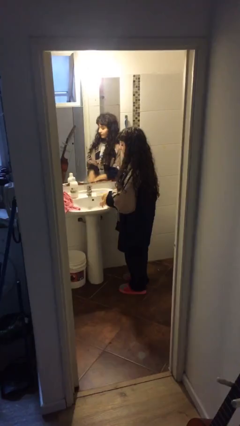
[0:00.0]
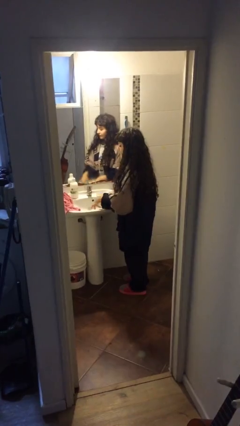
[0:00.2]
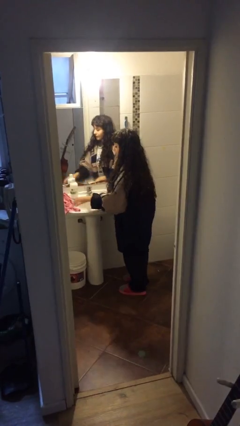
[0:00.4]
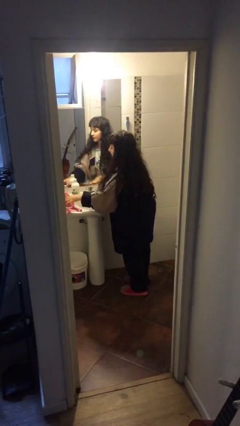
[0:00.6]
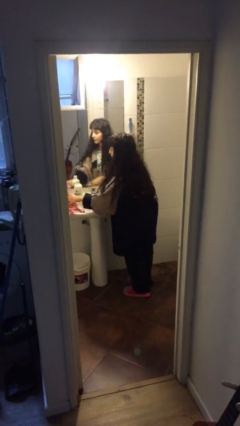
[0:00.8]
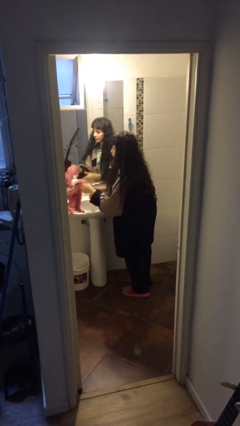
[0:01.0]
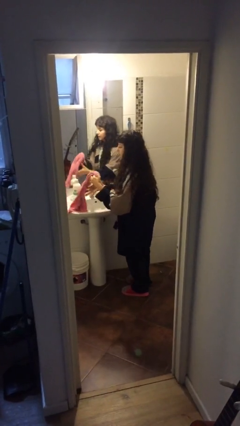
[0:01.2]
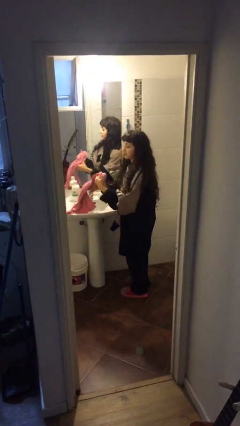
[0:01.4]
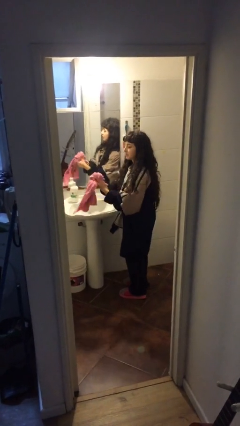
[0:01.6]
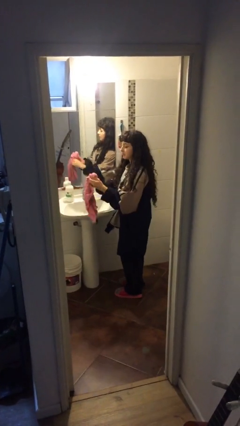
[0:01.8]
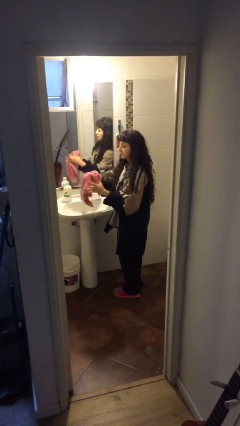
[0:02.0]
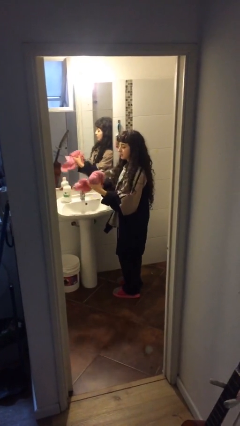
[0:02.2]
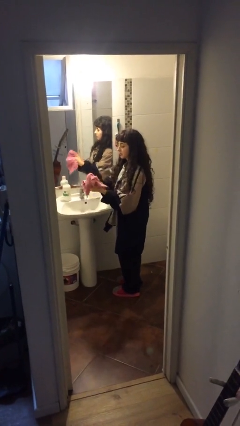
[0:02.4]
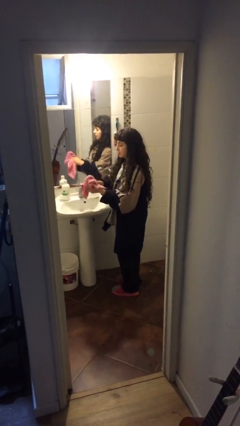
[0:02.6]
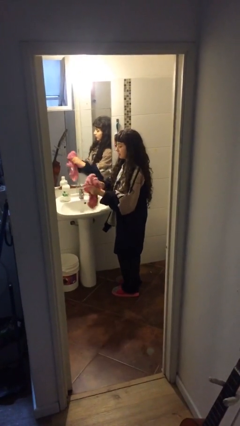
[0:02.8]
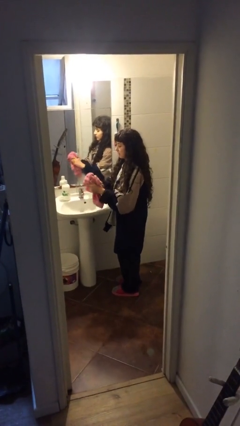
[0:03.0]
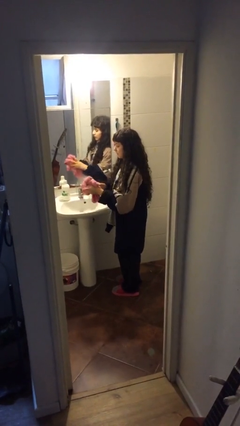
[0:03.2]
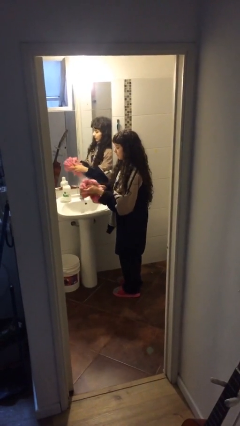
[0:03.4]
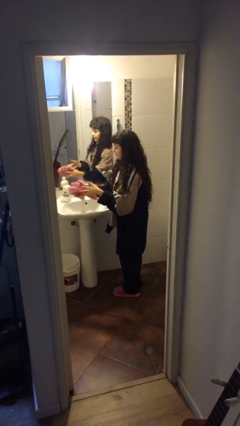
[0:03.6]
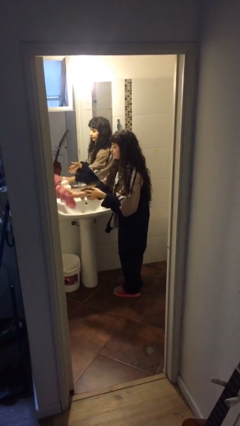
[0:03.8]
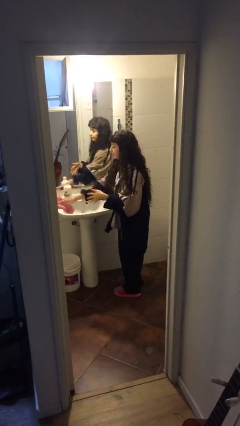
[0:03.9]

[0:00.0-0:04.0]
person dries hands with towel

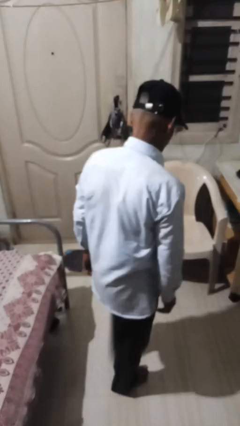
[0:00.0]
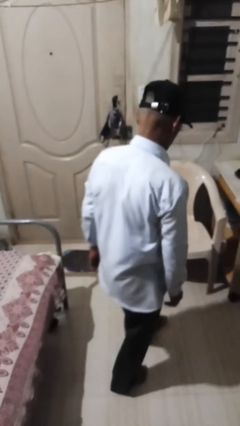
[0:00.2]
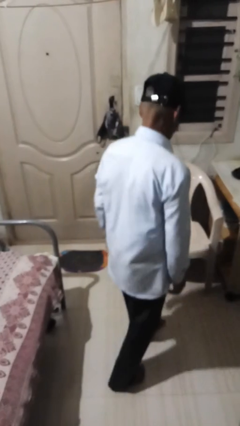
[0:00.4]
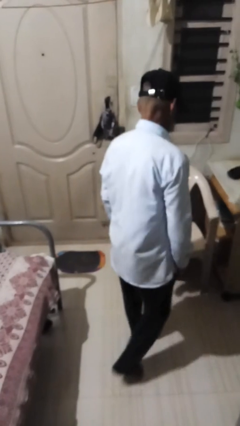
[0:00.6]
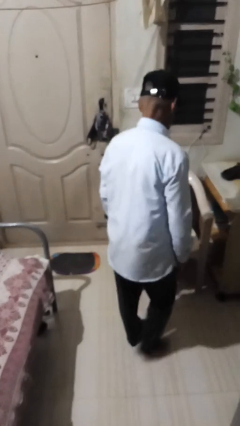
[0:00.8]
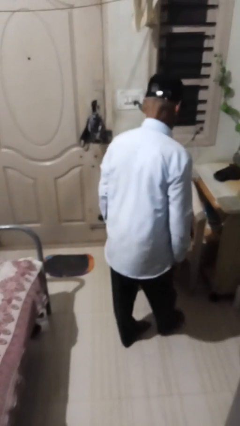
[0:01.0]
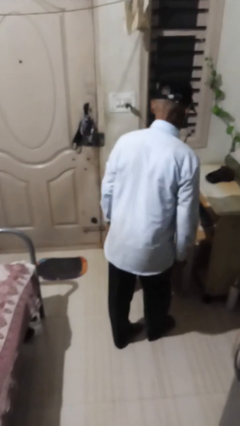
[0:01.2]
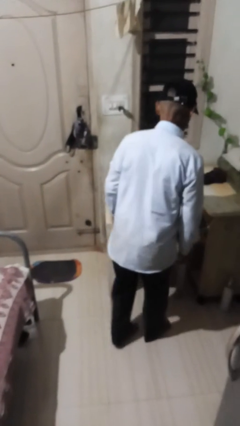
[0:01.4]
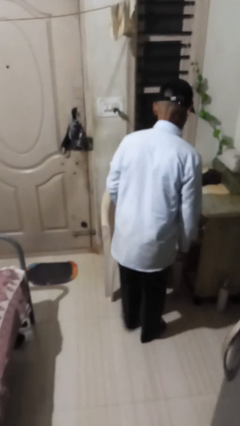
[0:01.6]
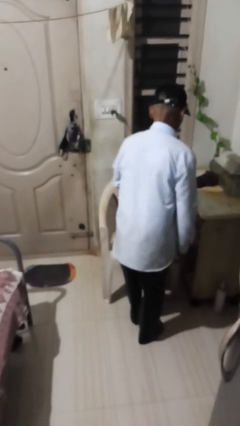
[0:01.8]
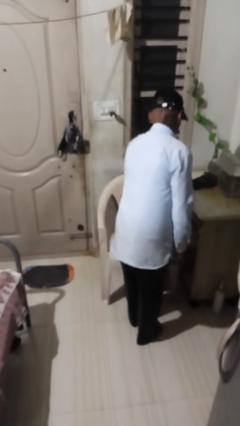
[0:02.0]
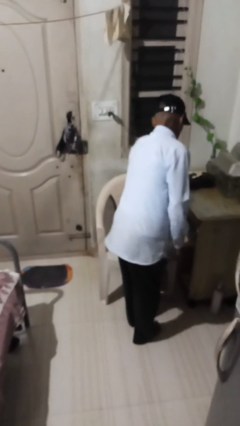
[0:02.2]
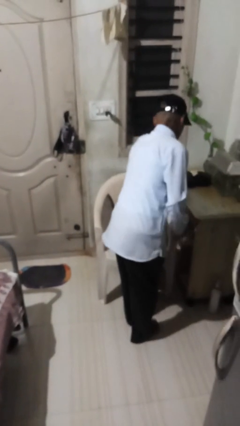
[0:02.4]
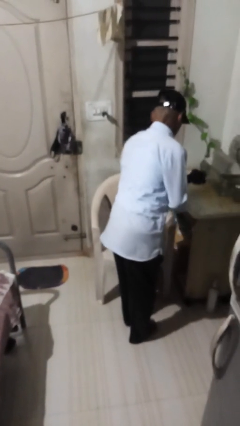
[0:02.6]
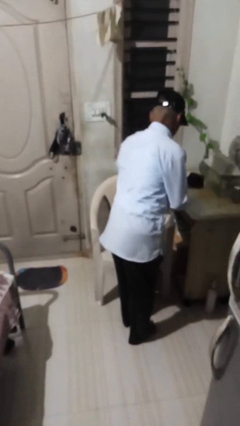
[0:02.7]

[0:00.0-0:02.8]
person picks up object from table

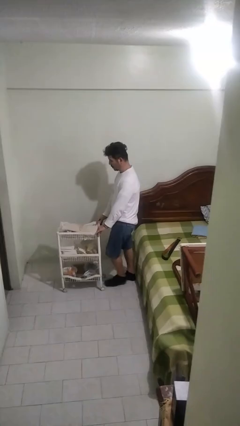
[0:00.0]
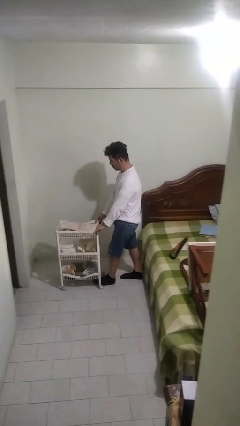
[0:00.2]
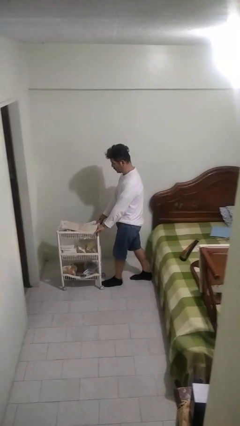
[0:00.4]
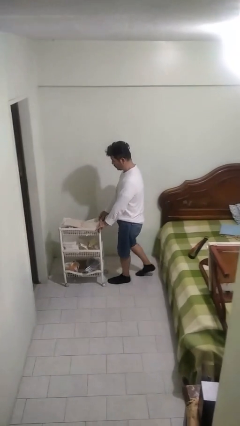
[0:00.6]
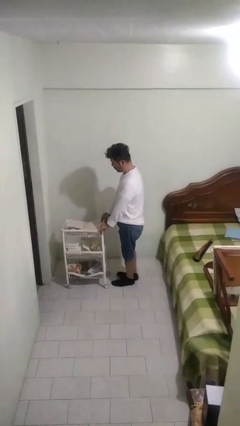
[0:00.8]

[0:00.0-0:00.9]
person pushes wheeled cart

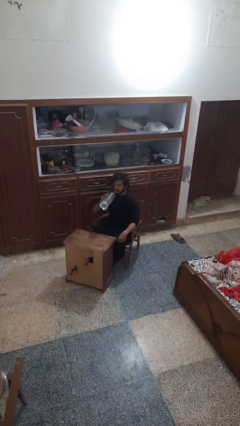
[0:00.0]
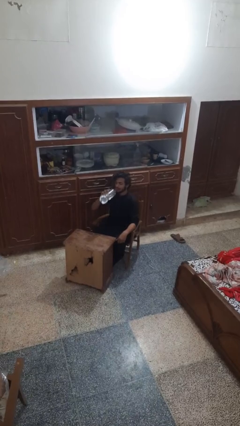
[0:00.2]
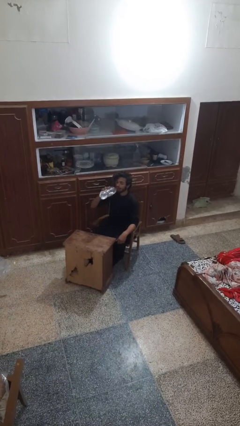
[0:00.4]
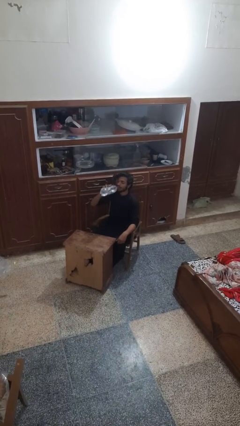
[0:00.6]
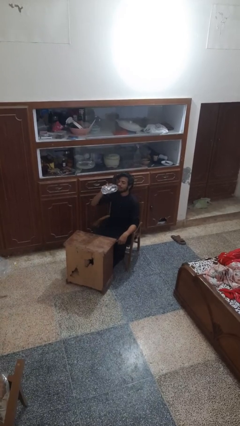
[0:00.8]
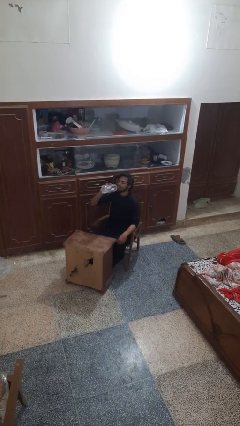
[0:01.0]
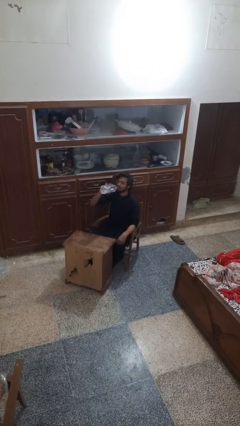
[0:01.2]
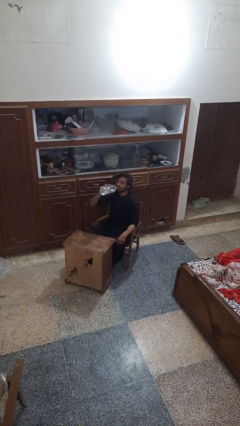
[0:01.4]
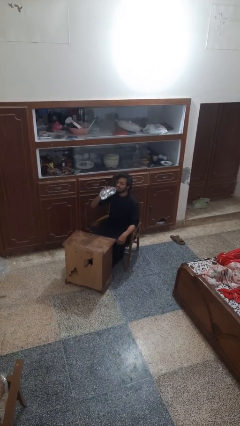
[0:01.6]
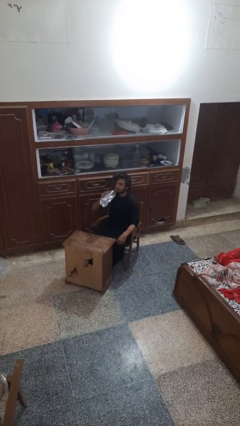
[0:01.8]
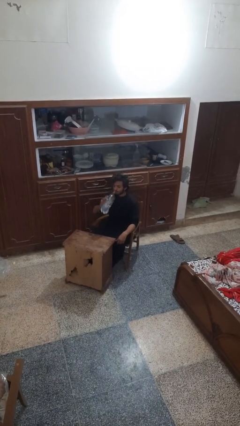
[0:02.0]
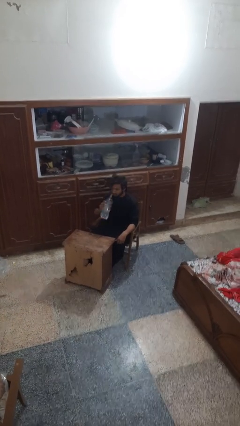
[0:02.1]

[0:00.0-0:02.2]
person drinks from bottle

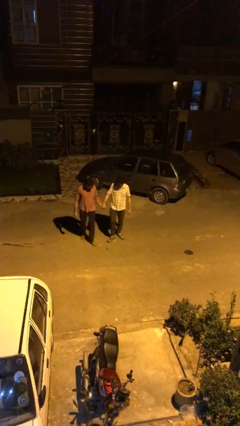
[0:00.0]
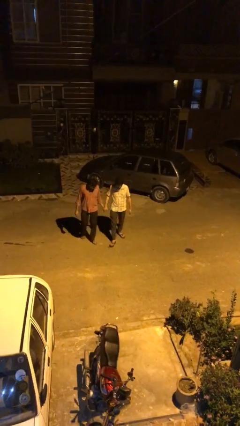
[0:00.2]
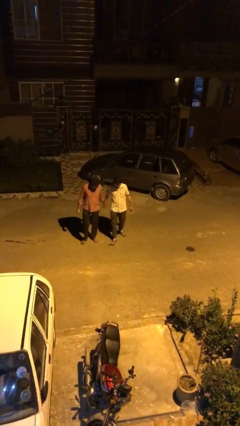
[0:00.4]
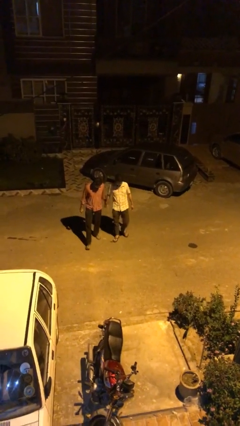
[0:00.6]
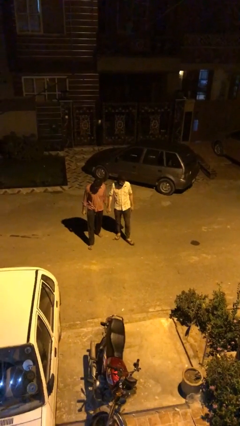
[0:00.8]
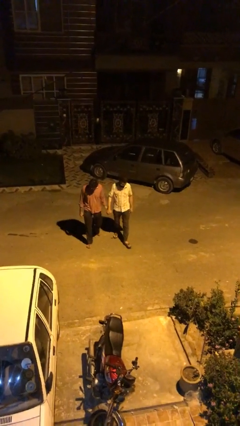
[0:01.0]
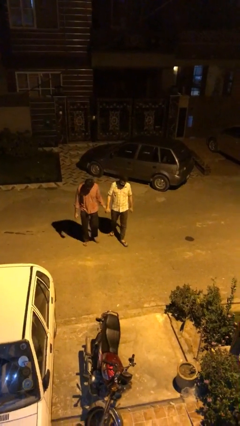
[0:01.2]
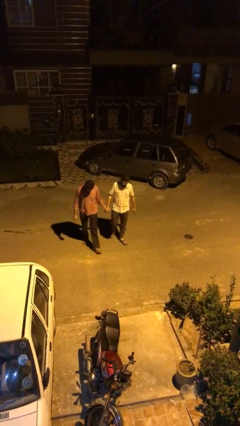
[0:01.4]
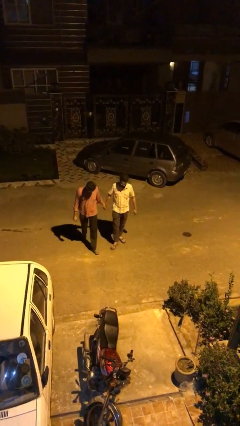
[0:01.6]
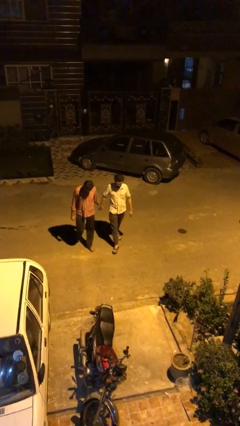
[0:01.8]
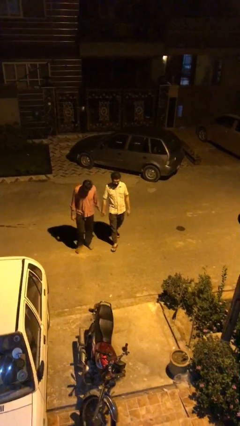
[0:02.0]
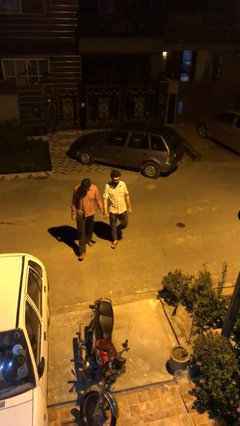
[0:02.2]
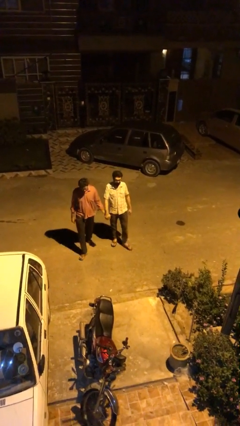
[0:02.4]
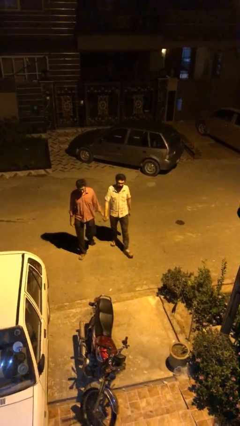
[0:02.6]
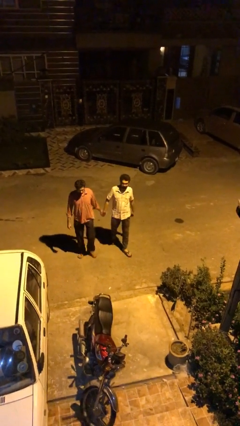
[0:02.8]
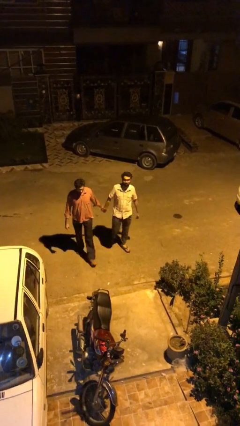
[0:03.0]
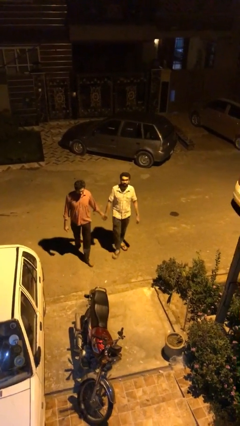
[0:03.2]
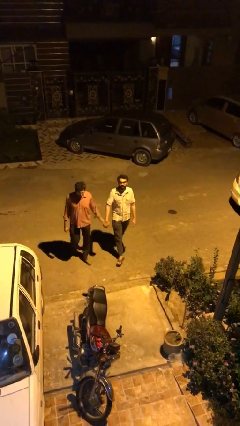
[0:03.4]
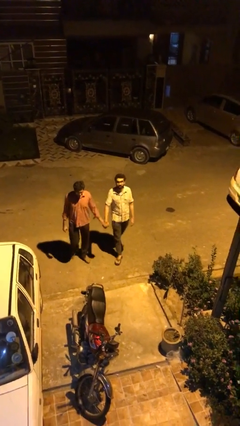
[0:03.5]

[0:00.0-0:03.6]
person holds hand

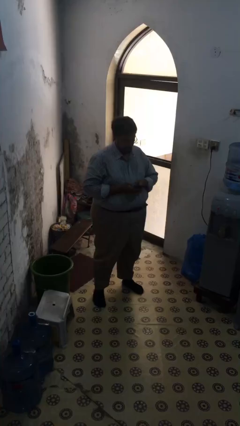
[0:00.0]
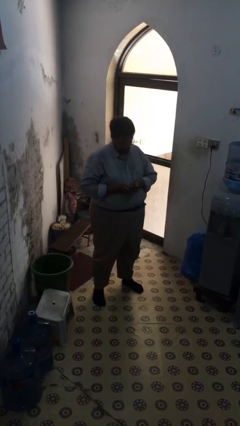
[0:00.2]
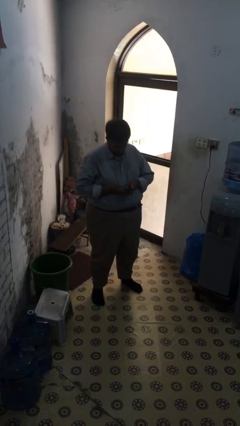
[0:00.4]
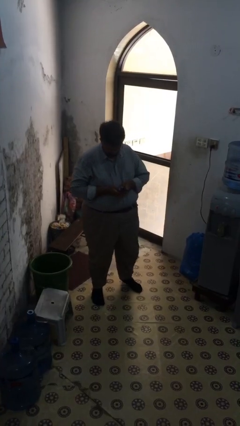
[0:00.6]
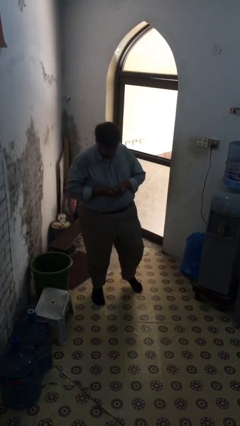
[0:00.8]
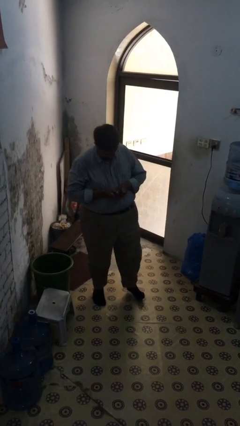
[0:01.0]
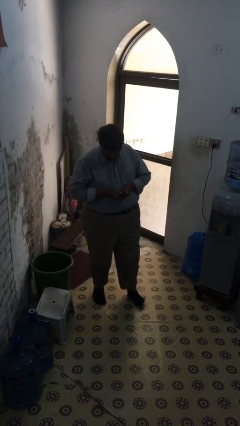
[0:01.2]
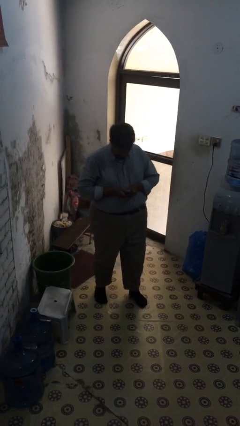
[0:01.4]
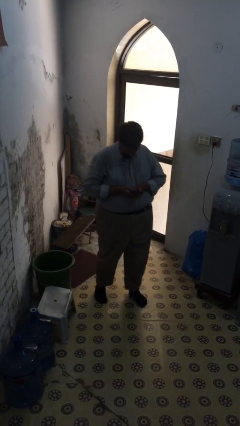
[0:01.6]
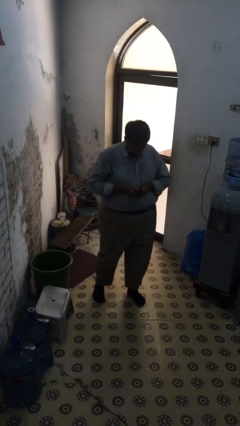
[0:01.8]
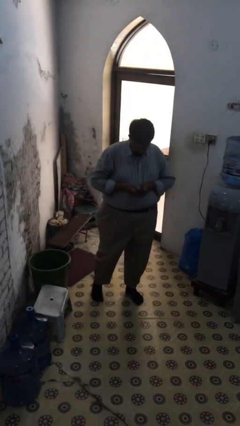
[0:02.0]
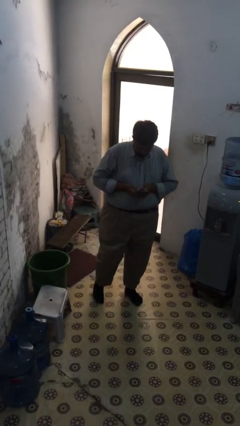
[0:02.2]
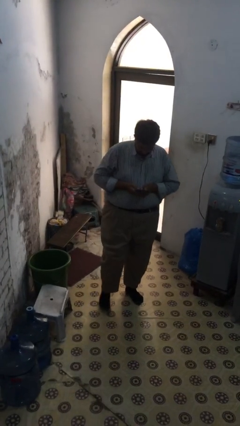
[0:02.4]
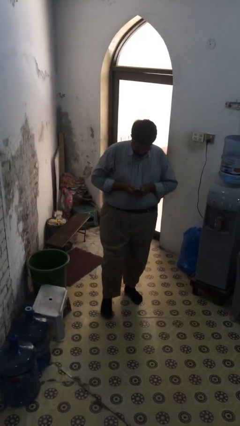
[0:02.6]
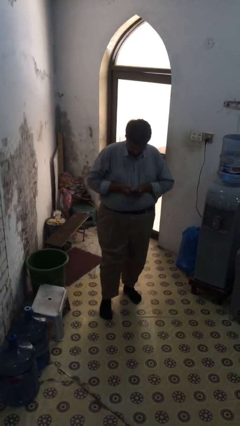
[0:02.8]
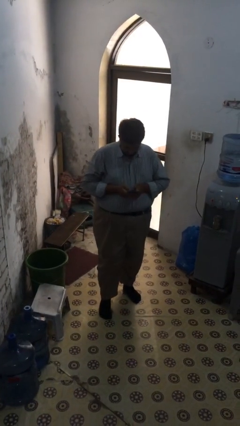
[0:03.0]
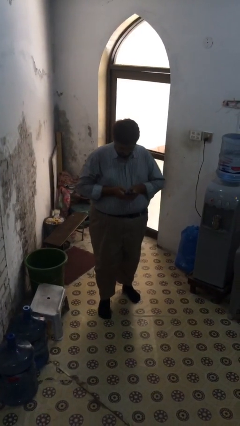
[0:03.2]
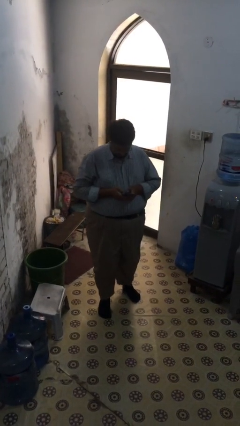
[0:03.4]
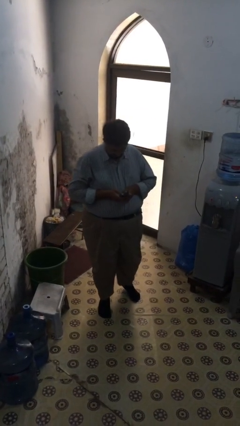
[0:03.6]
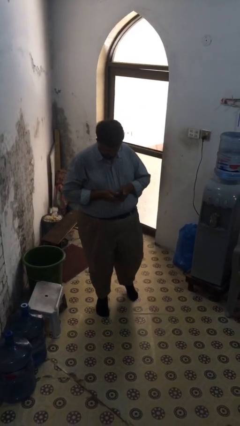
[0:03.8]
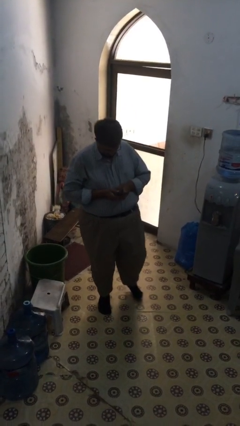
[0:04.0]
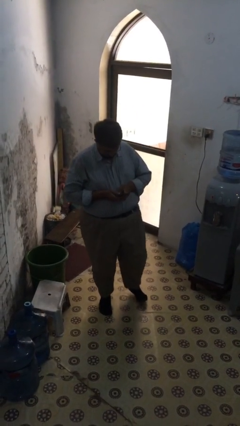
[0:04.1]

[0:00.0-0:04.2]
person texts on phone
